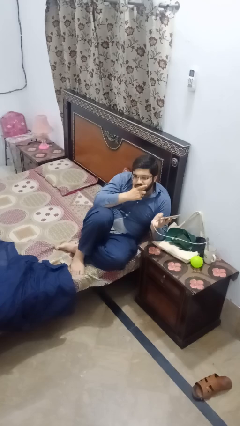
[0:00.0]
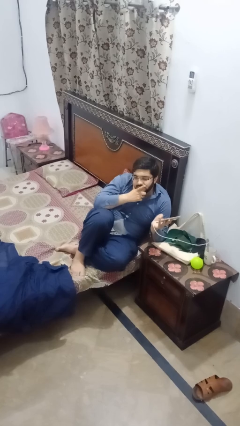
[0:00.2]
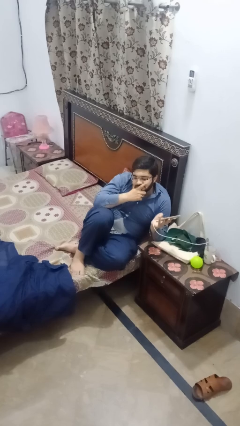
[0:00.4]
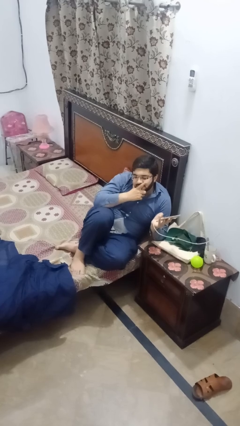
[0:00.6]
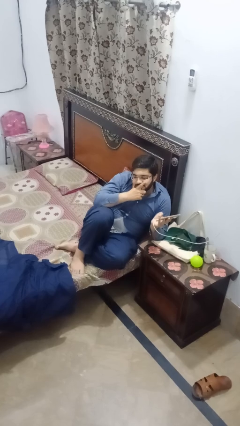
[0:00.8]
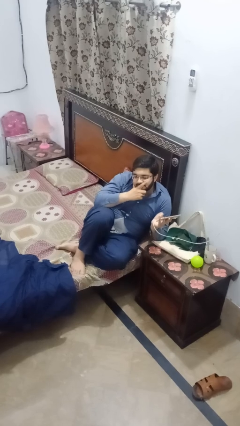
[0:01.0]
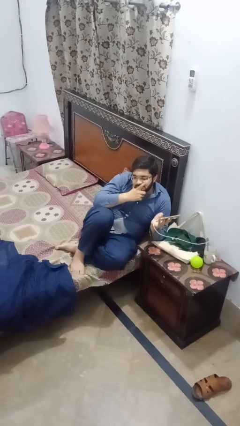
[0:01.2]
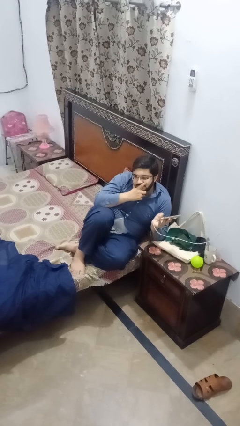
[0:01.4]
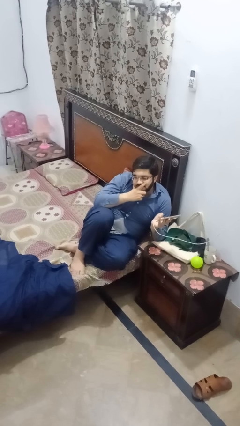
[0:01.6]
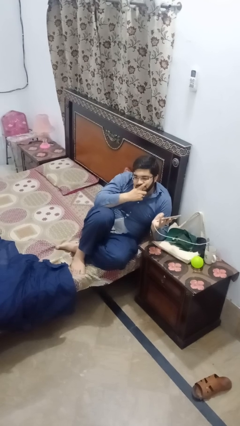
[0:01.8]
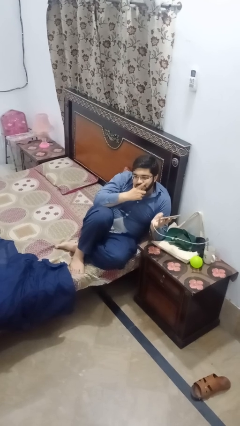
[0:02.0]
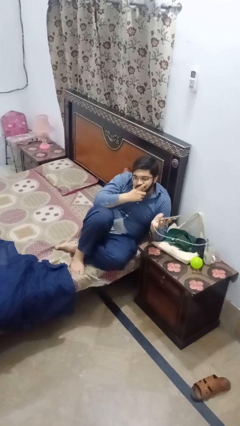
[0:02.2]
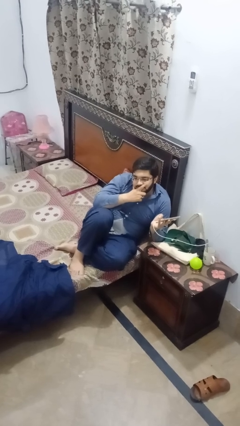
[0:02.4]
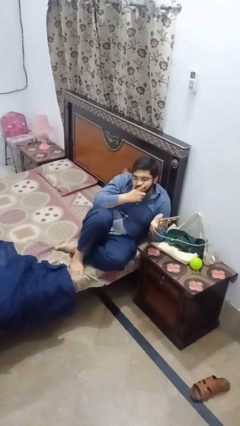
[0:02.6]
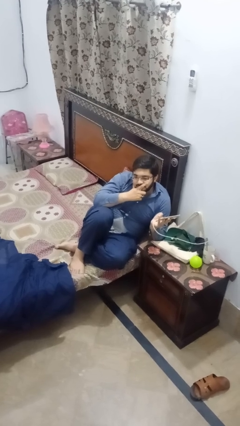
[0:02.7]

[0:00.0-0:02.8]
person strokes chin

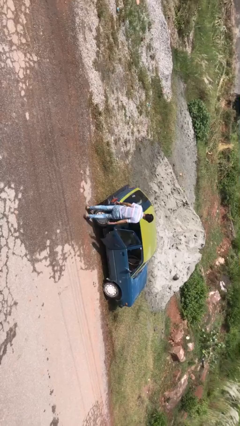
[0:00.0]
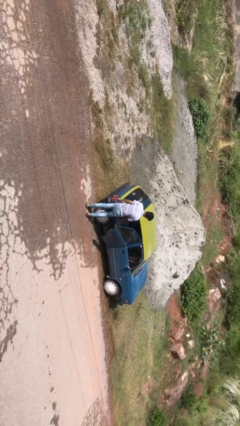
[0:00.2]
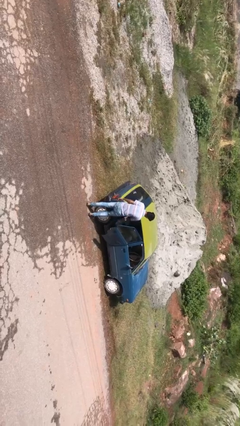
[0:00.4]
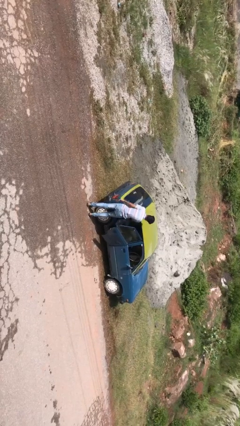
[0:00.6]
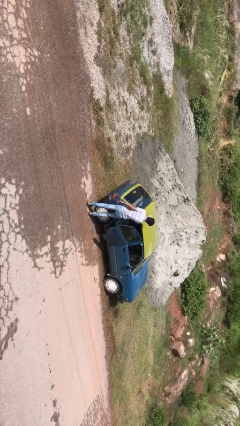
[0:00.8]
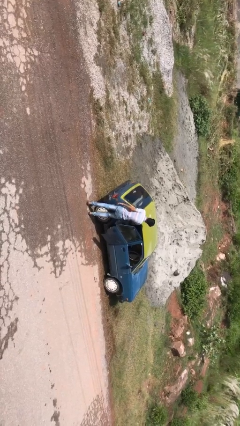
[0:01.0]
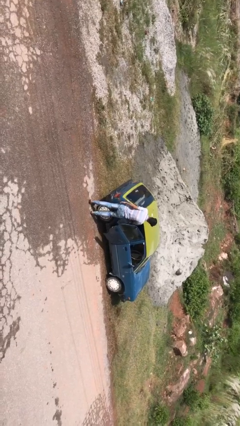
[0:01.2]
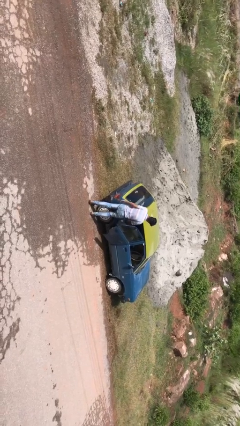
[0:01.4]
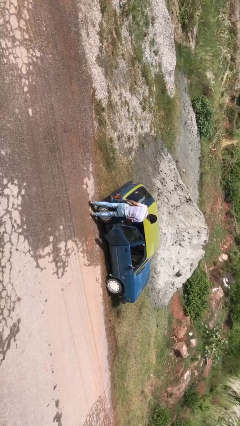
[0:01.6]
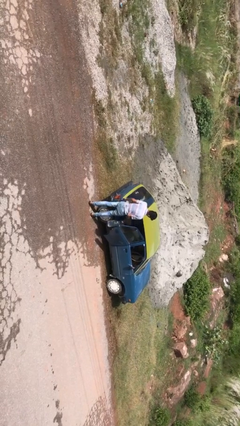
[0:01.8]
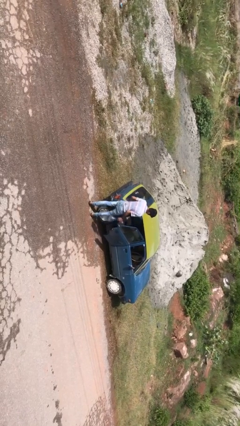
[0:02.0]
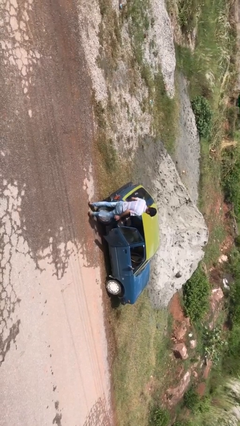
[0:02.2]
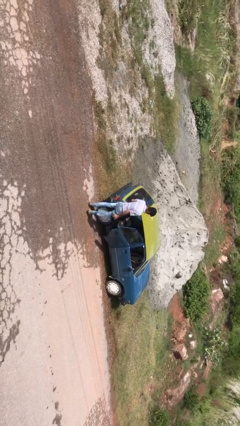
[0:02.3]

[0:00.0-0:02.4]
person unloads car

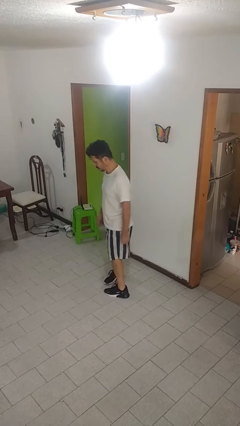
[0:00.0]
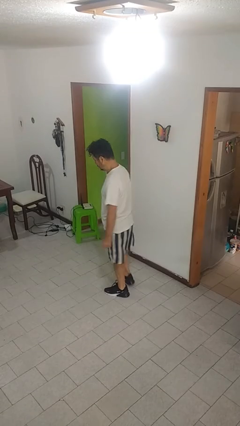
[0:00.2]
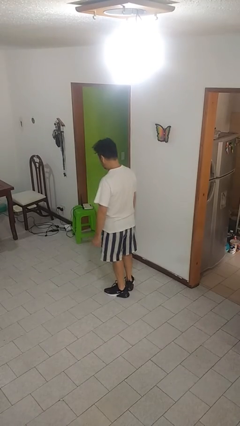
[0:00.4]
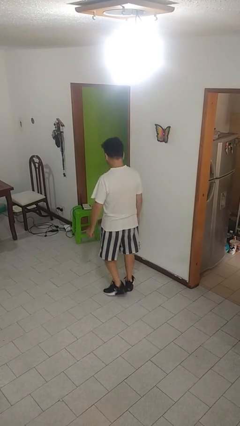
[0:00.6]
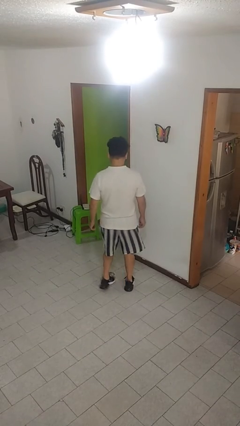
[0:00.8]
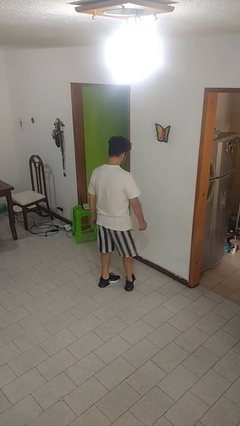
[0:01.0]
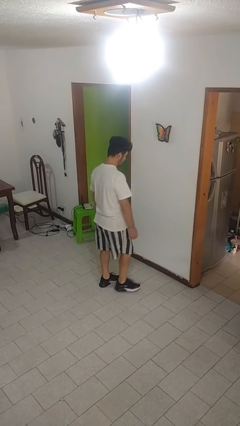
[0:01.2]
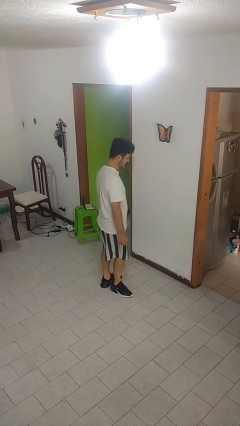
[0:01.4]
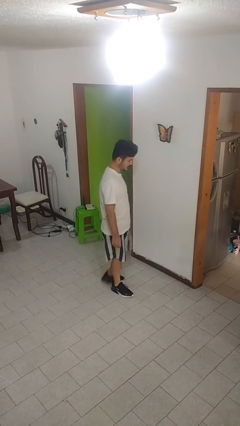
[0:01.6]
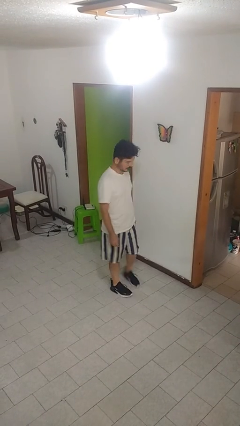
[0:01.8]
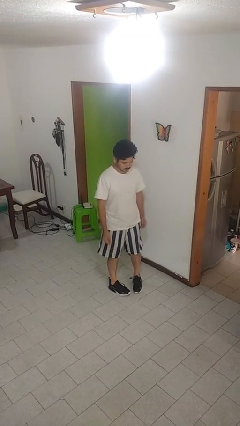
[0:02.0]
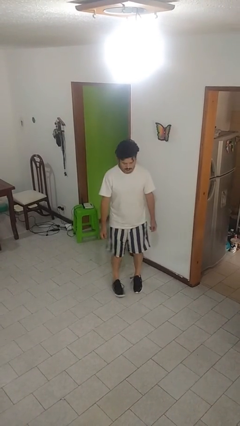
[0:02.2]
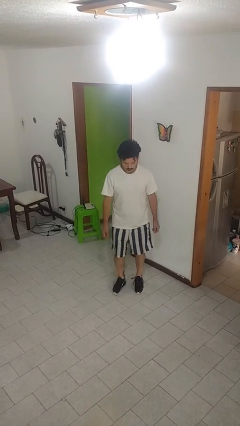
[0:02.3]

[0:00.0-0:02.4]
person twirls

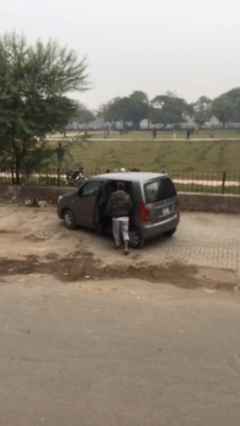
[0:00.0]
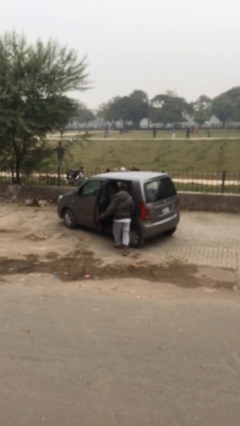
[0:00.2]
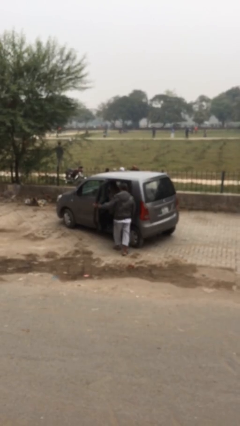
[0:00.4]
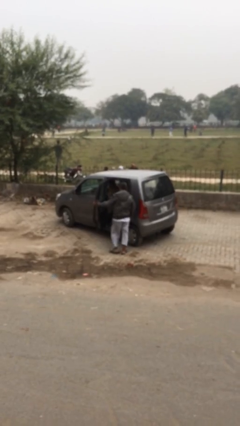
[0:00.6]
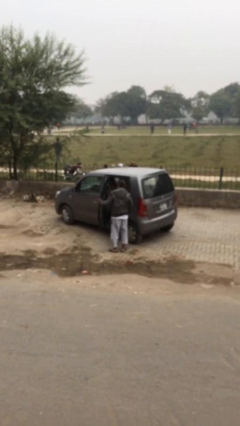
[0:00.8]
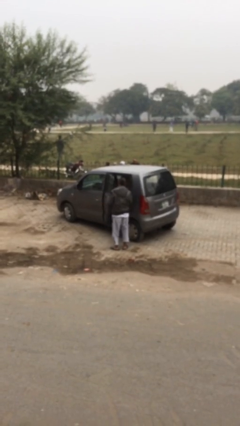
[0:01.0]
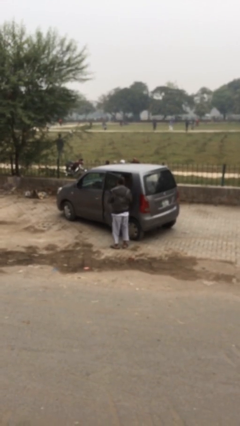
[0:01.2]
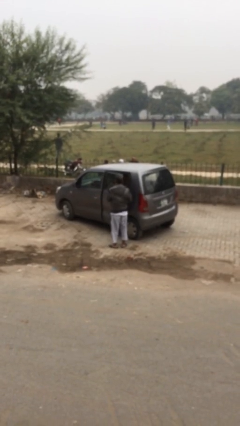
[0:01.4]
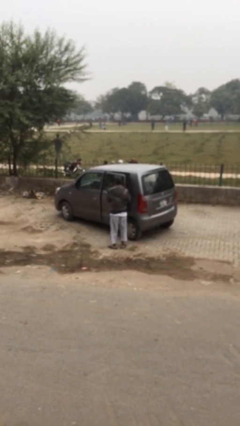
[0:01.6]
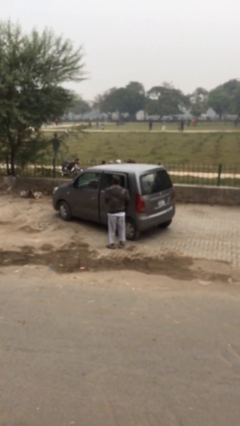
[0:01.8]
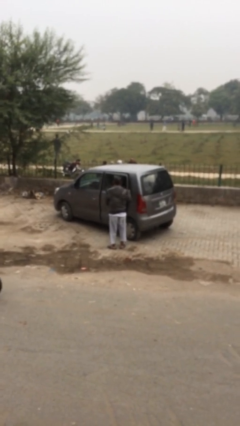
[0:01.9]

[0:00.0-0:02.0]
person closes car door

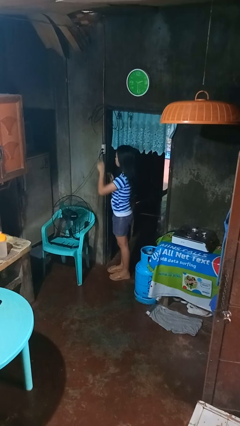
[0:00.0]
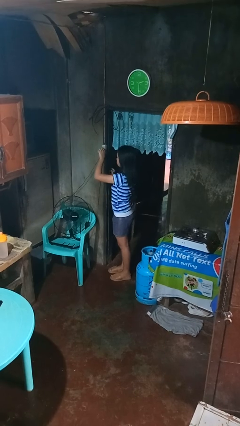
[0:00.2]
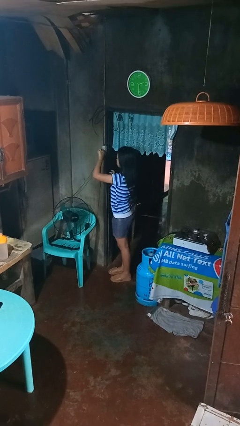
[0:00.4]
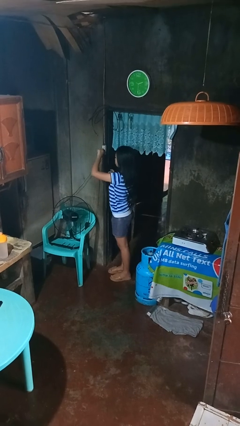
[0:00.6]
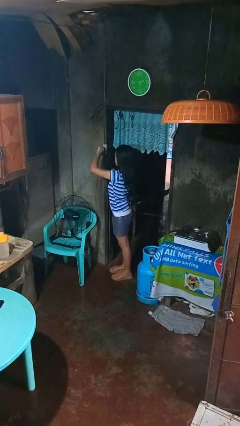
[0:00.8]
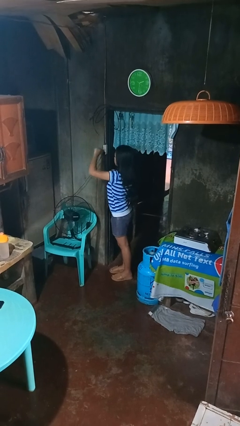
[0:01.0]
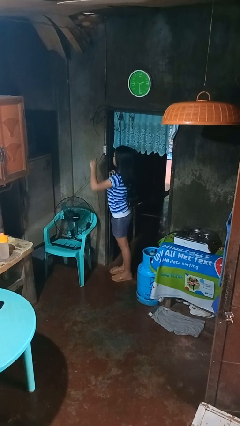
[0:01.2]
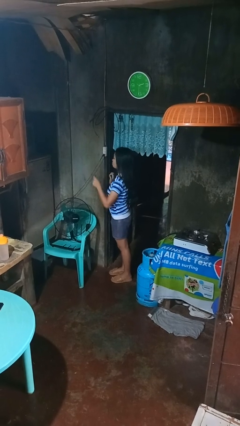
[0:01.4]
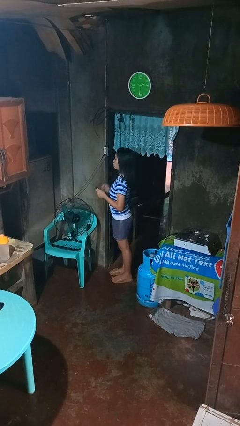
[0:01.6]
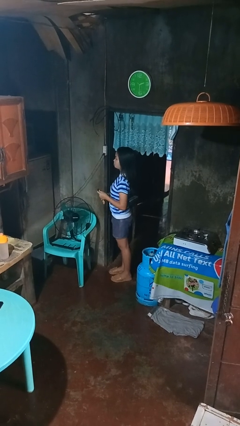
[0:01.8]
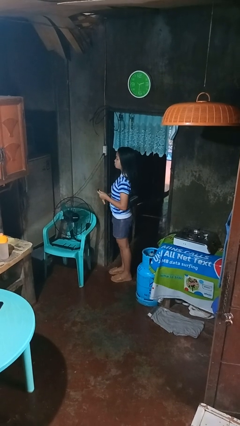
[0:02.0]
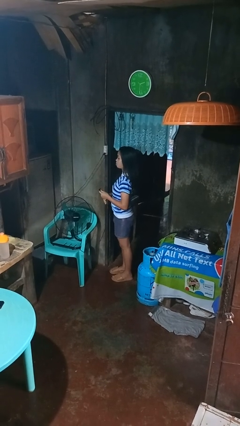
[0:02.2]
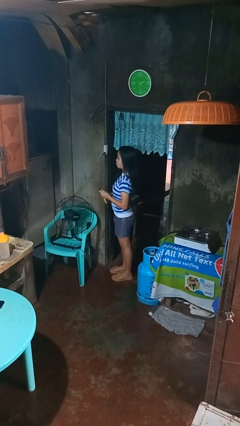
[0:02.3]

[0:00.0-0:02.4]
person unplugs from electrical socket

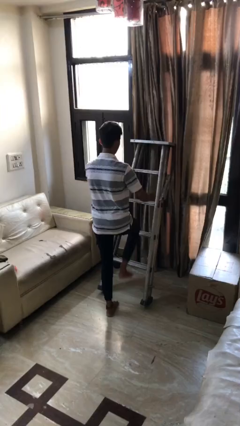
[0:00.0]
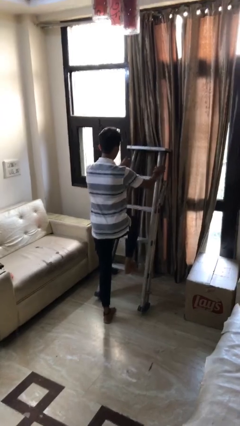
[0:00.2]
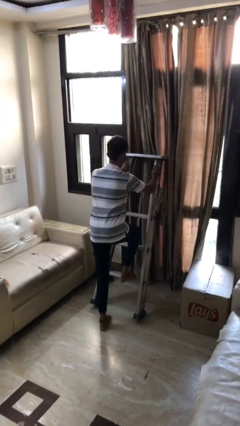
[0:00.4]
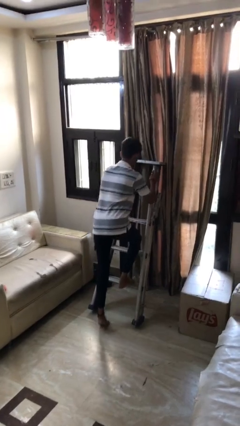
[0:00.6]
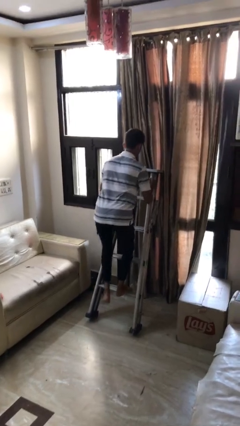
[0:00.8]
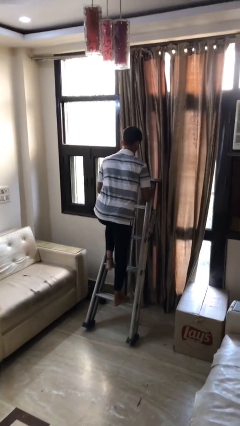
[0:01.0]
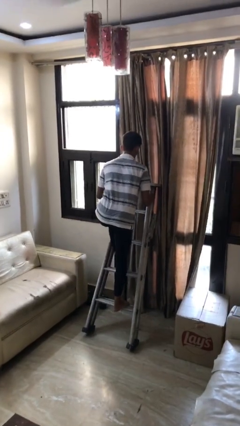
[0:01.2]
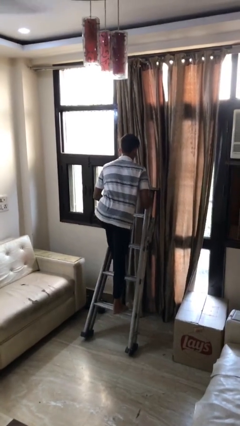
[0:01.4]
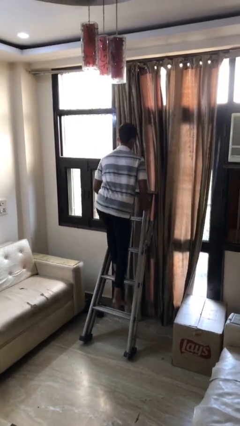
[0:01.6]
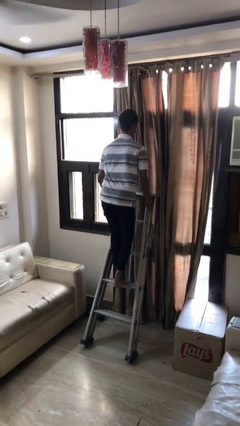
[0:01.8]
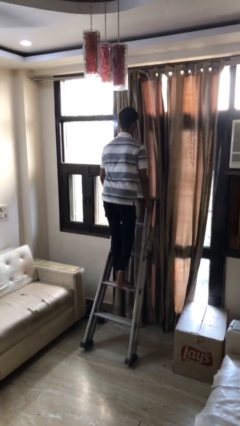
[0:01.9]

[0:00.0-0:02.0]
person climbs up ladder

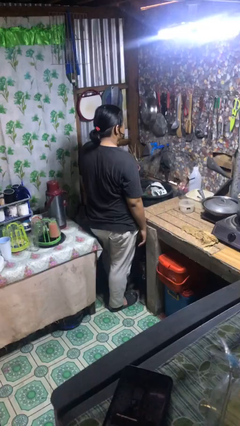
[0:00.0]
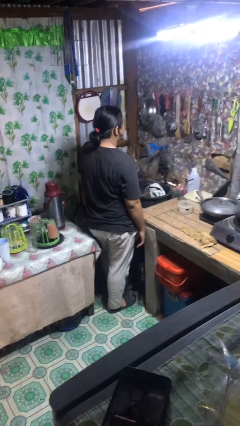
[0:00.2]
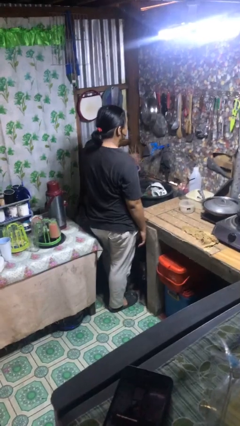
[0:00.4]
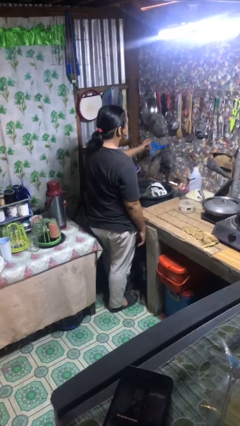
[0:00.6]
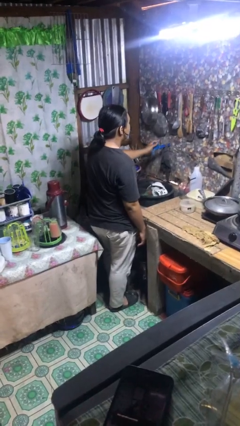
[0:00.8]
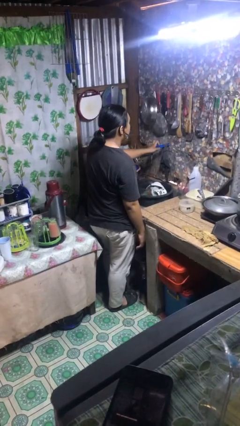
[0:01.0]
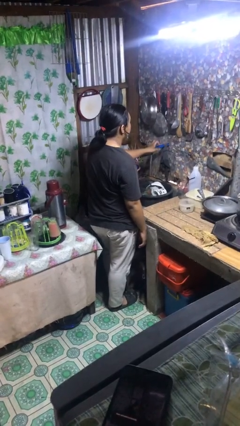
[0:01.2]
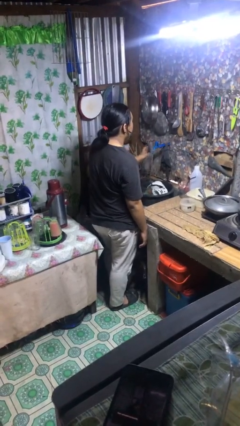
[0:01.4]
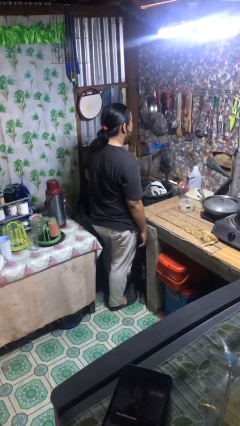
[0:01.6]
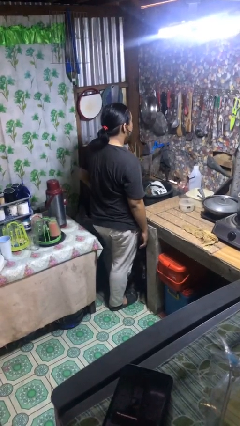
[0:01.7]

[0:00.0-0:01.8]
person turns on faucet

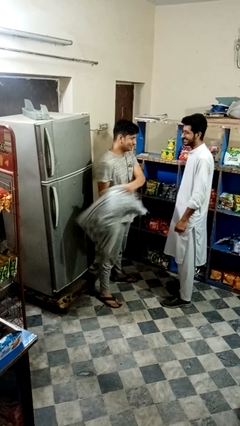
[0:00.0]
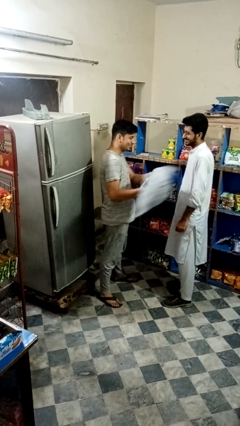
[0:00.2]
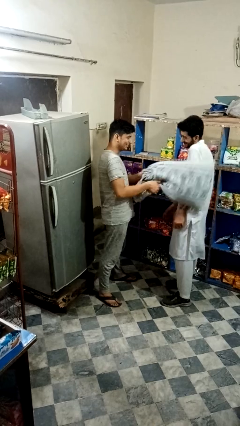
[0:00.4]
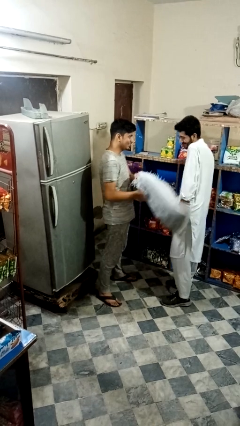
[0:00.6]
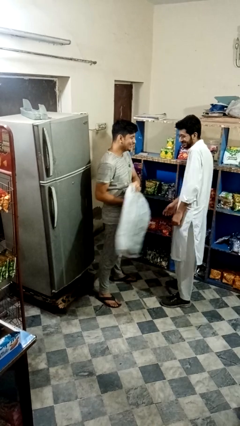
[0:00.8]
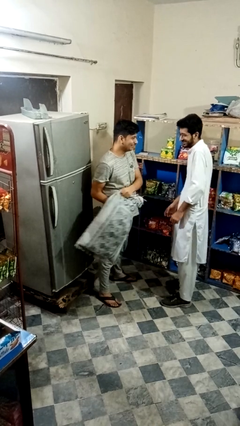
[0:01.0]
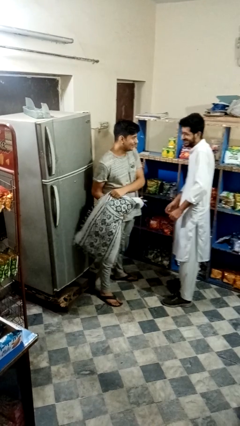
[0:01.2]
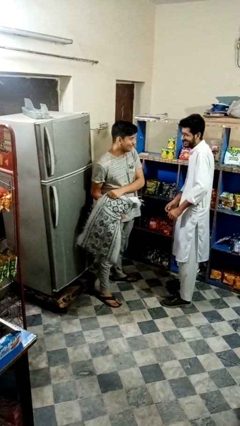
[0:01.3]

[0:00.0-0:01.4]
person hits person with pillow
